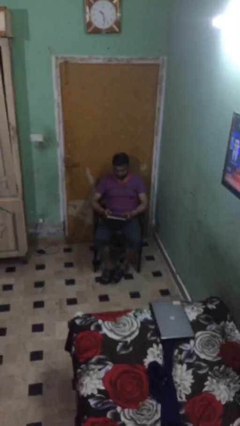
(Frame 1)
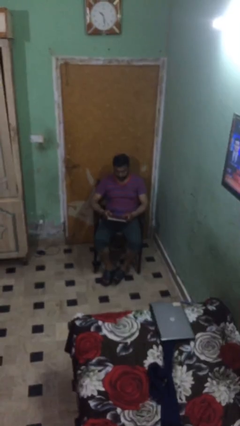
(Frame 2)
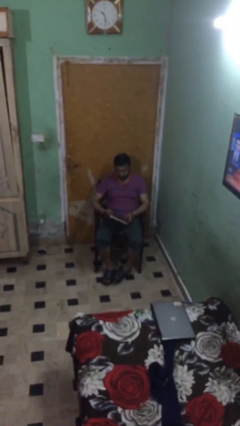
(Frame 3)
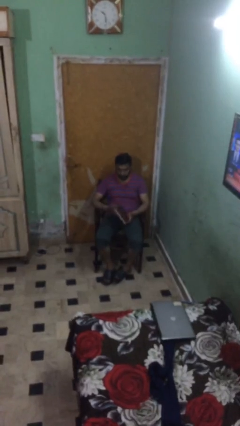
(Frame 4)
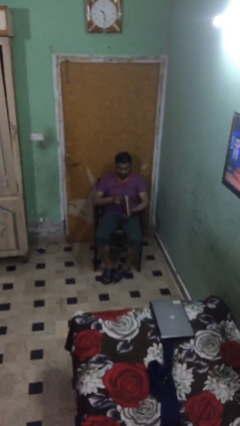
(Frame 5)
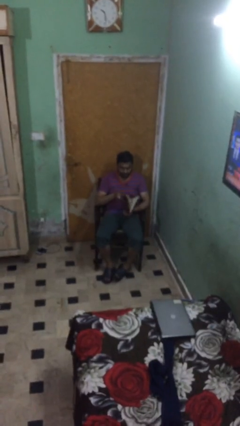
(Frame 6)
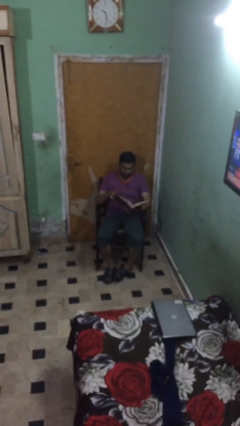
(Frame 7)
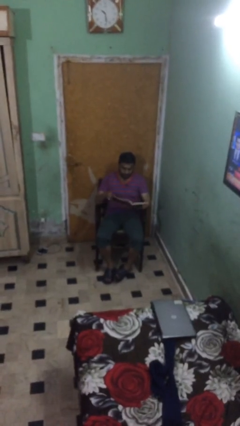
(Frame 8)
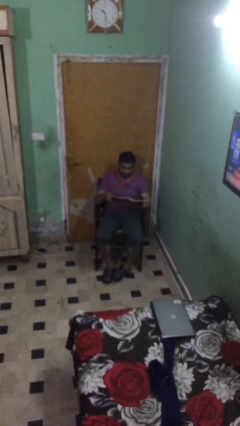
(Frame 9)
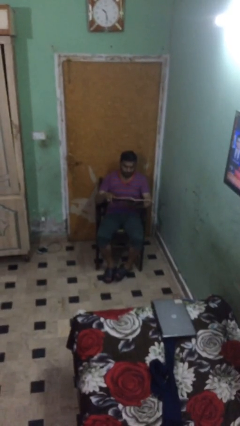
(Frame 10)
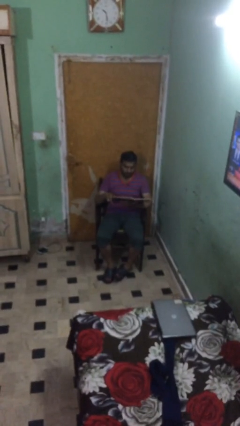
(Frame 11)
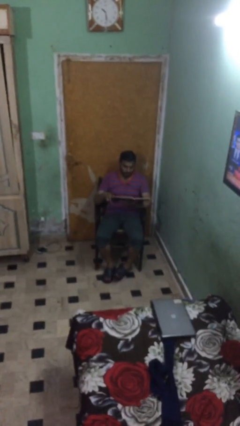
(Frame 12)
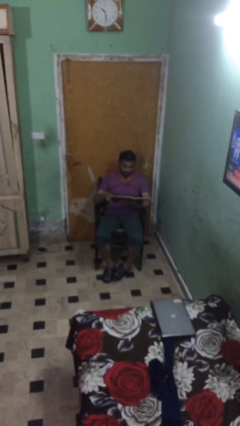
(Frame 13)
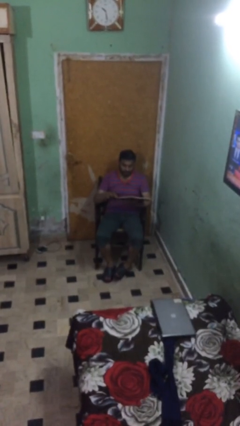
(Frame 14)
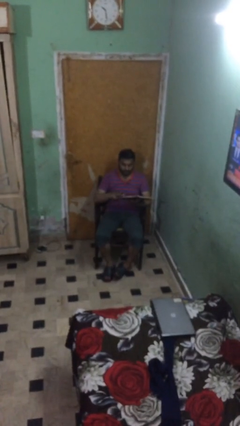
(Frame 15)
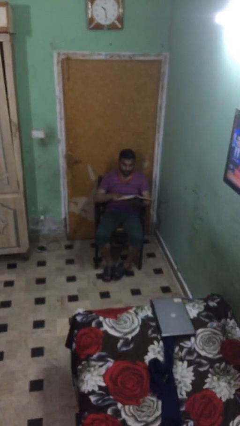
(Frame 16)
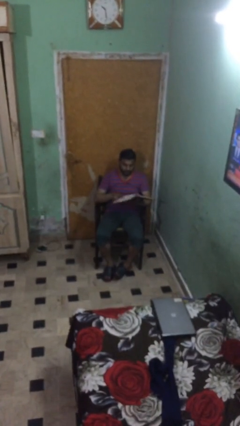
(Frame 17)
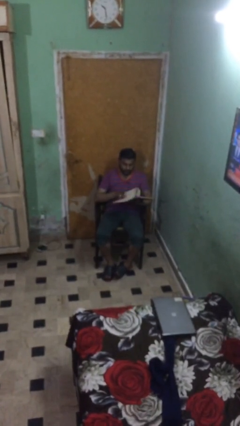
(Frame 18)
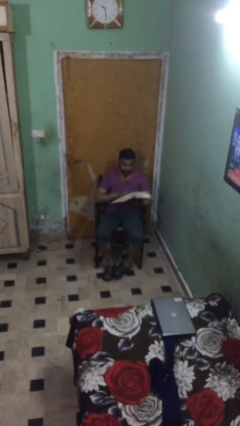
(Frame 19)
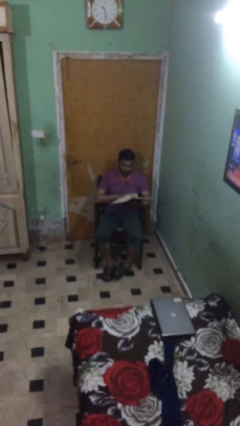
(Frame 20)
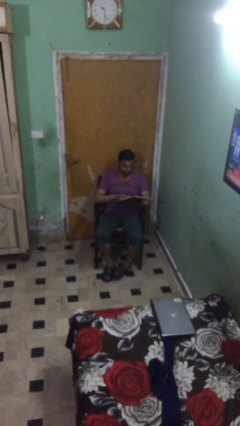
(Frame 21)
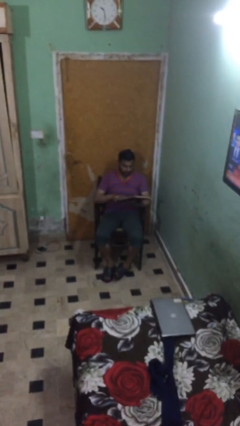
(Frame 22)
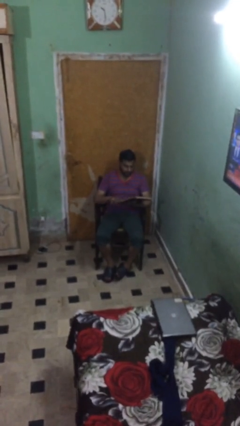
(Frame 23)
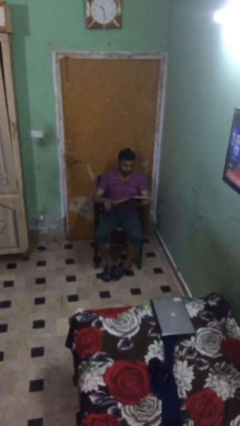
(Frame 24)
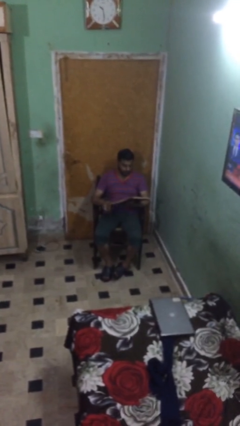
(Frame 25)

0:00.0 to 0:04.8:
person reads document

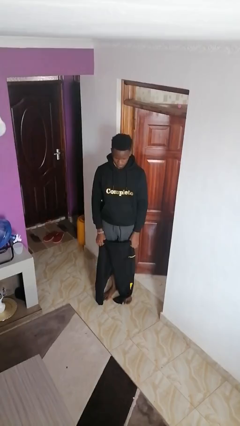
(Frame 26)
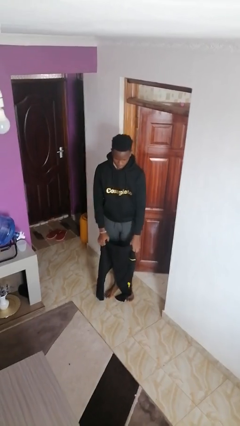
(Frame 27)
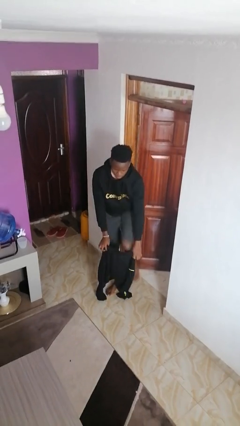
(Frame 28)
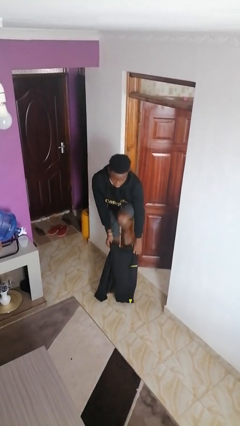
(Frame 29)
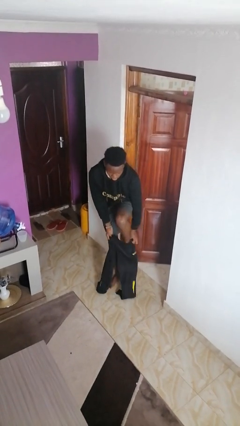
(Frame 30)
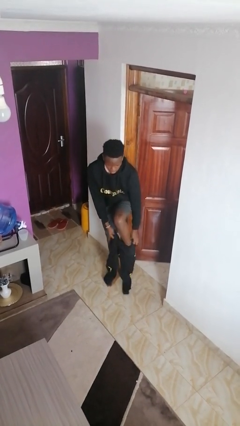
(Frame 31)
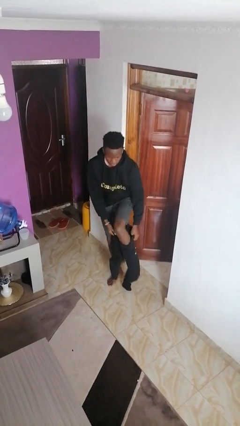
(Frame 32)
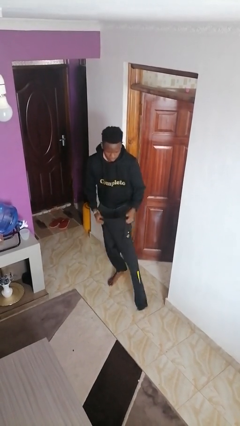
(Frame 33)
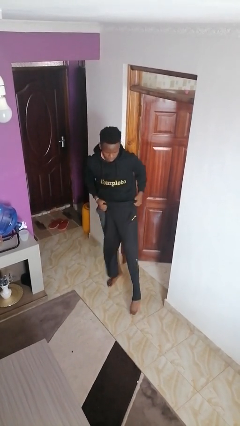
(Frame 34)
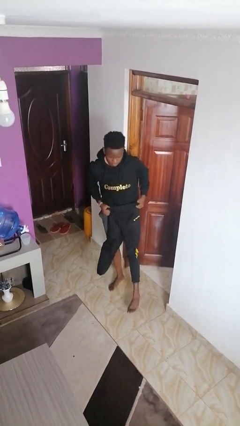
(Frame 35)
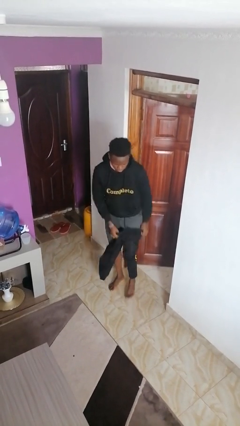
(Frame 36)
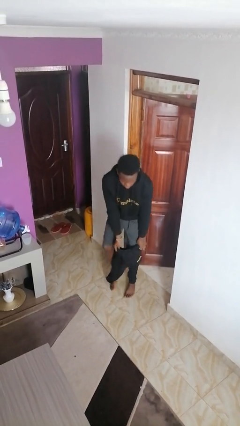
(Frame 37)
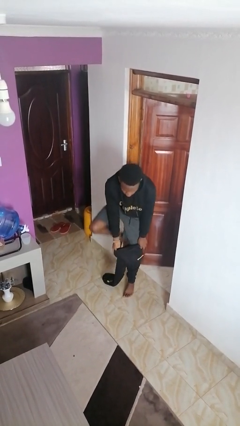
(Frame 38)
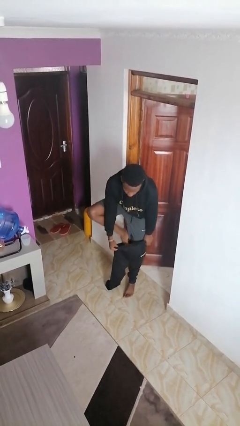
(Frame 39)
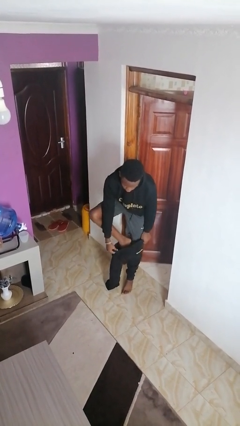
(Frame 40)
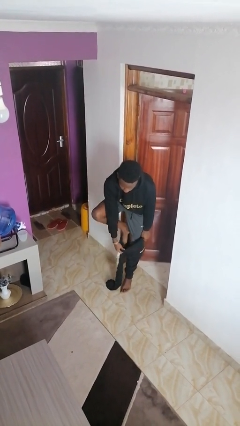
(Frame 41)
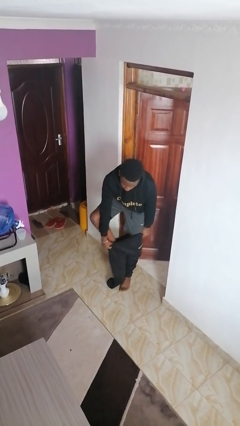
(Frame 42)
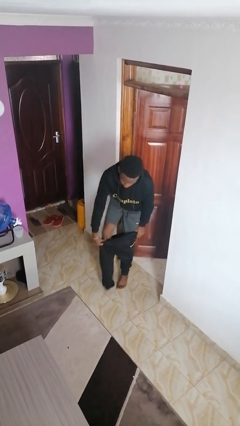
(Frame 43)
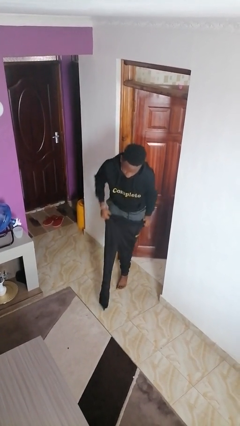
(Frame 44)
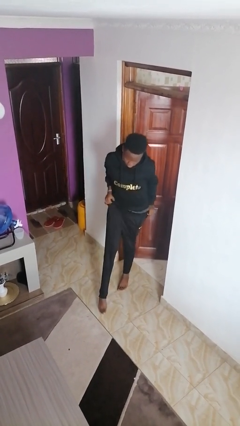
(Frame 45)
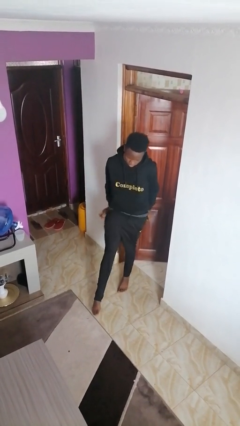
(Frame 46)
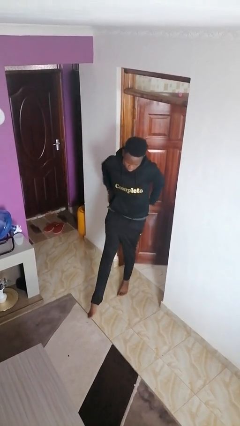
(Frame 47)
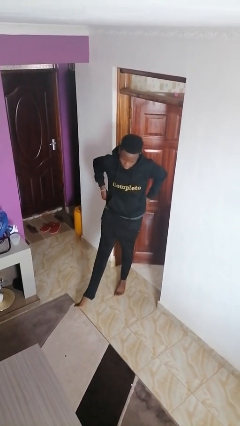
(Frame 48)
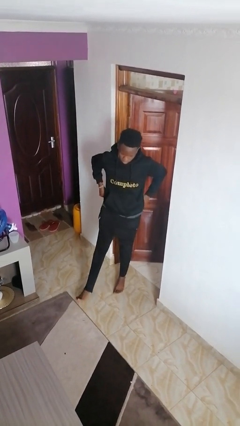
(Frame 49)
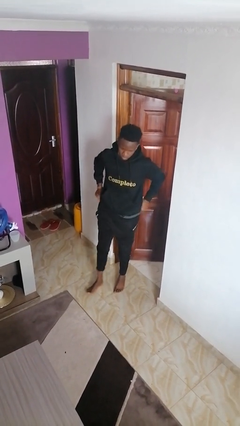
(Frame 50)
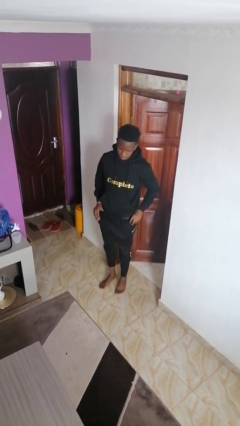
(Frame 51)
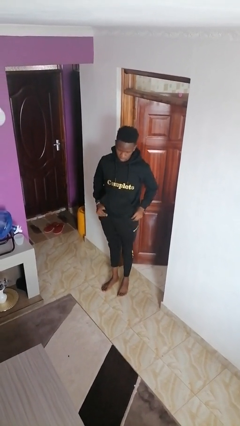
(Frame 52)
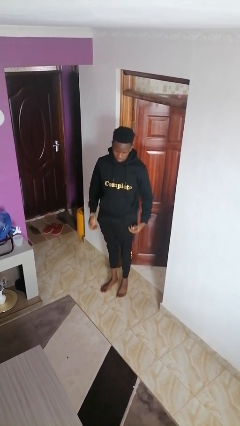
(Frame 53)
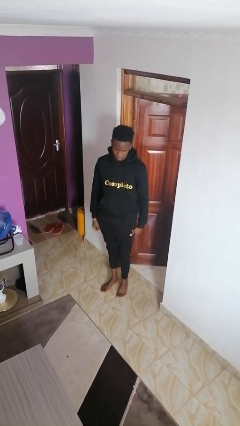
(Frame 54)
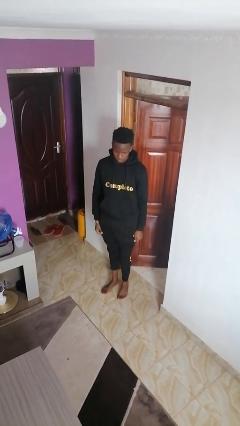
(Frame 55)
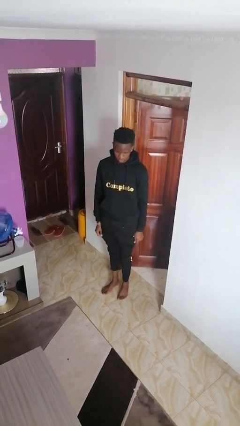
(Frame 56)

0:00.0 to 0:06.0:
person puts on pants

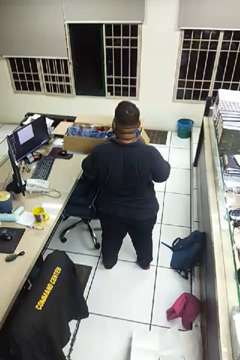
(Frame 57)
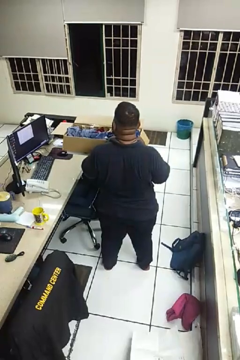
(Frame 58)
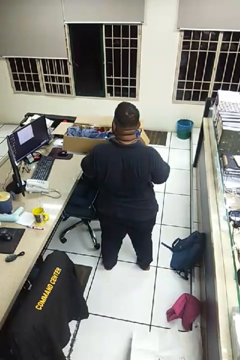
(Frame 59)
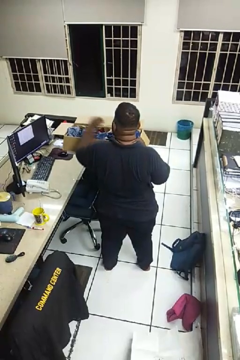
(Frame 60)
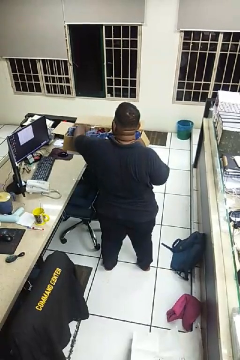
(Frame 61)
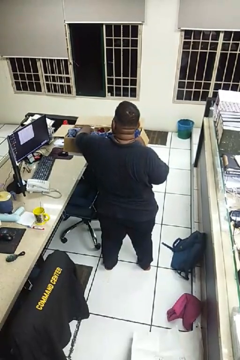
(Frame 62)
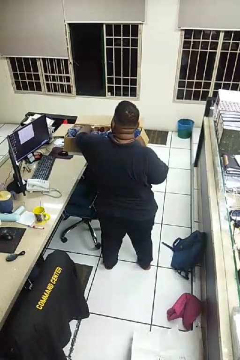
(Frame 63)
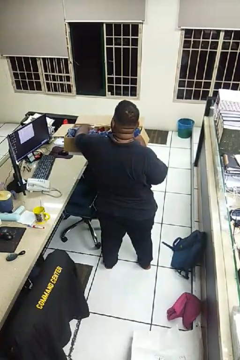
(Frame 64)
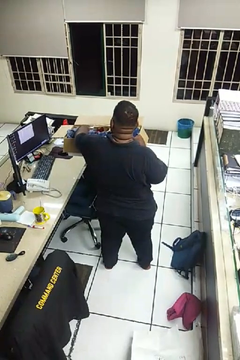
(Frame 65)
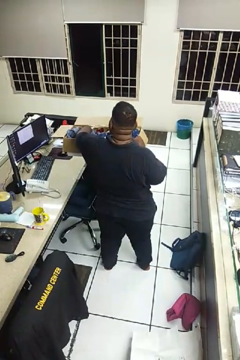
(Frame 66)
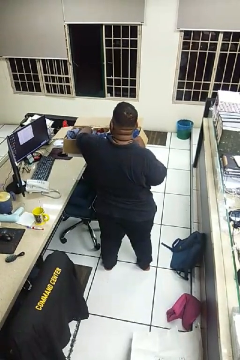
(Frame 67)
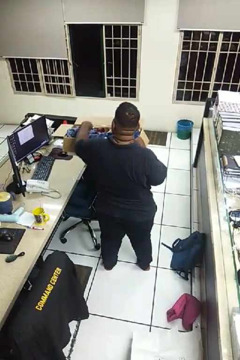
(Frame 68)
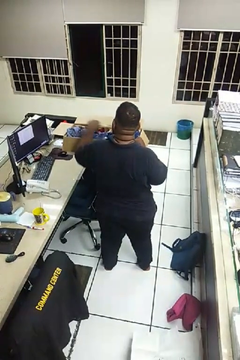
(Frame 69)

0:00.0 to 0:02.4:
person searches in box

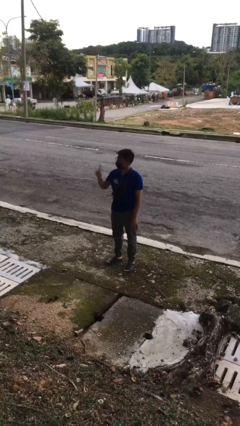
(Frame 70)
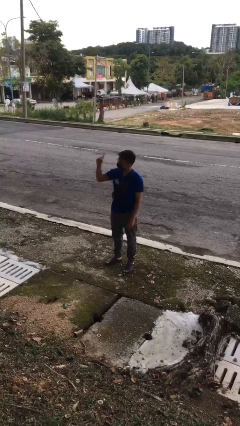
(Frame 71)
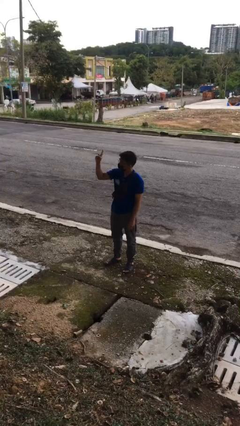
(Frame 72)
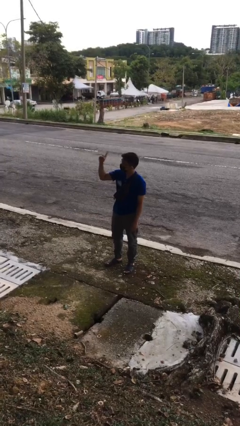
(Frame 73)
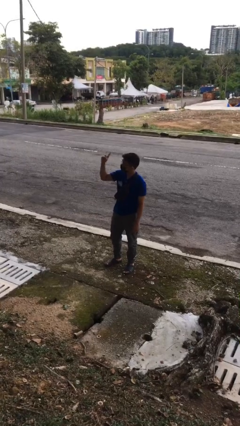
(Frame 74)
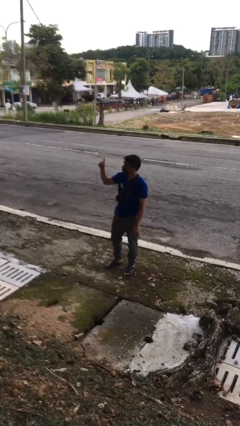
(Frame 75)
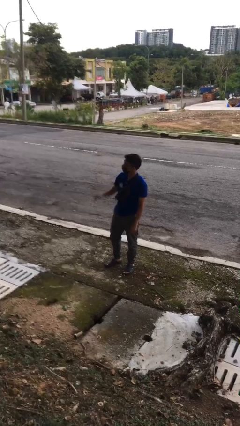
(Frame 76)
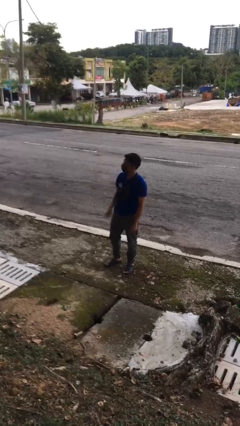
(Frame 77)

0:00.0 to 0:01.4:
person gestures number one

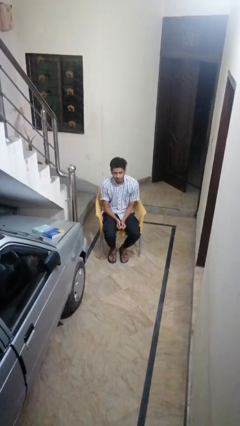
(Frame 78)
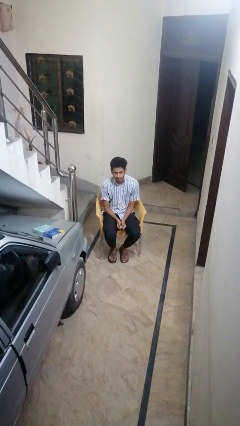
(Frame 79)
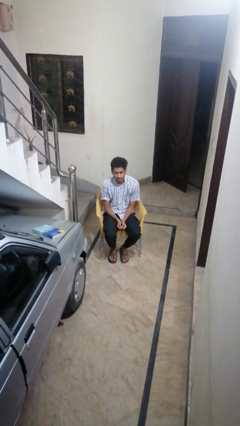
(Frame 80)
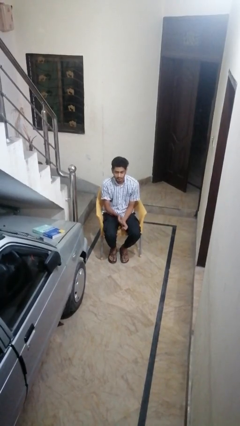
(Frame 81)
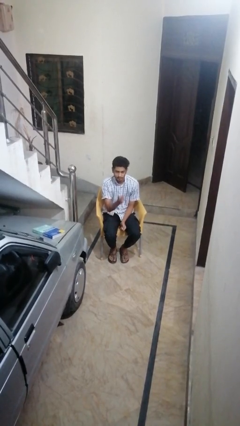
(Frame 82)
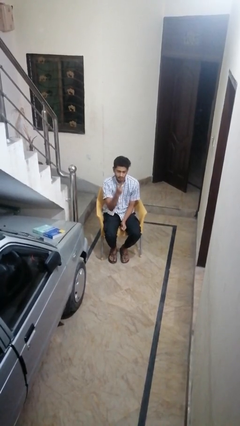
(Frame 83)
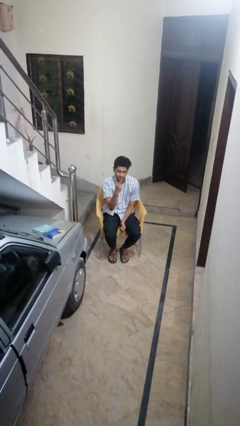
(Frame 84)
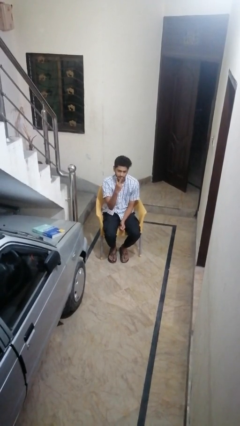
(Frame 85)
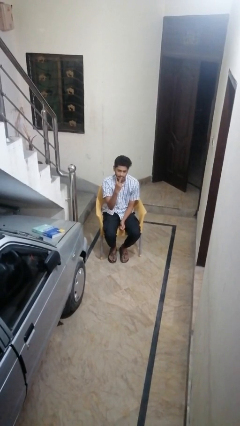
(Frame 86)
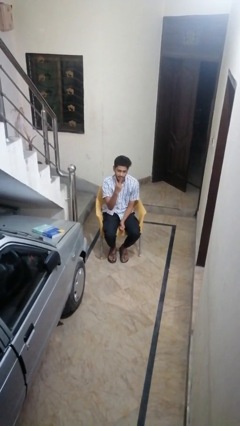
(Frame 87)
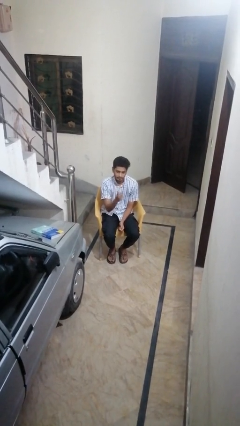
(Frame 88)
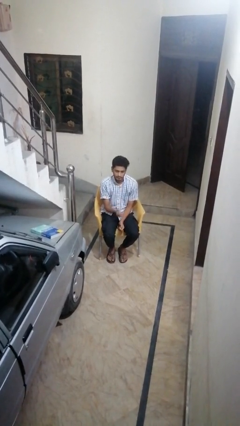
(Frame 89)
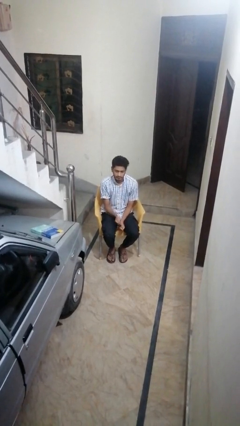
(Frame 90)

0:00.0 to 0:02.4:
person gestures peace

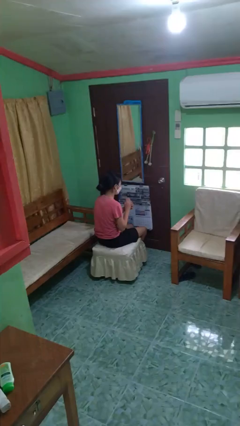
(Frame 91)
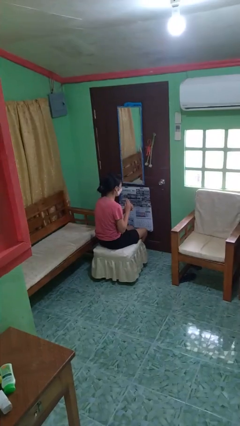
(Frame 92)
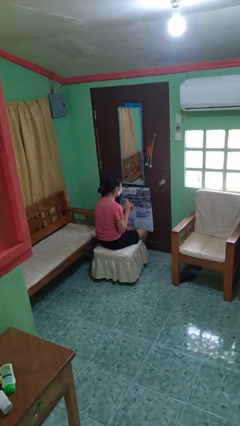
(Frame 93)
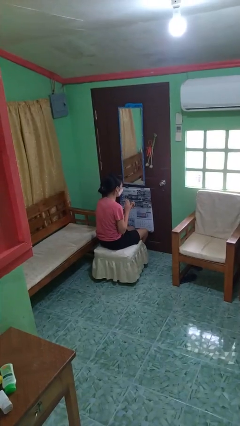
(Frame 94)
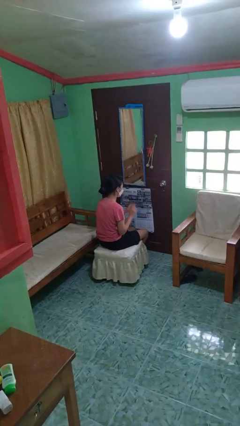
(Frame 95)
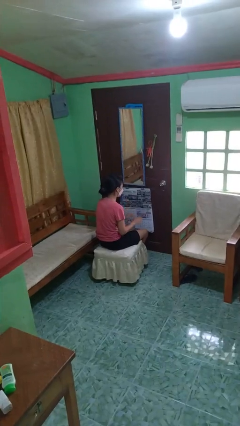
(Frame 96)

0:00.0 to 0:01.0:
person takes off ring
